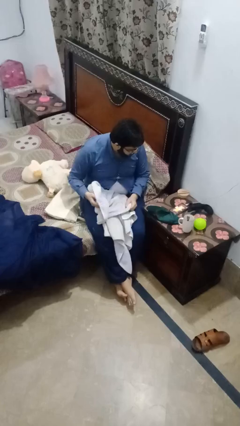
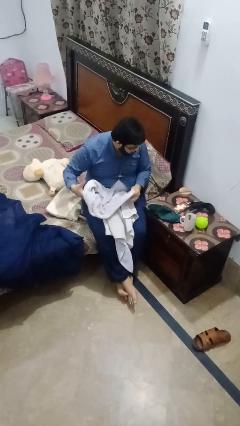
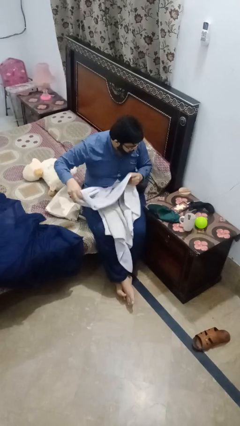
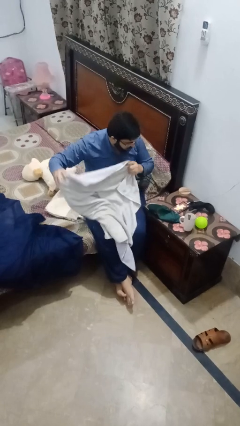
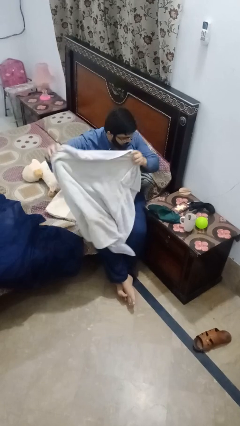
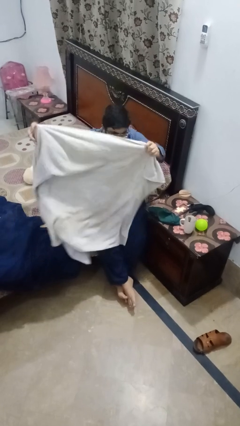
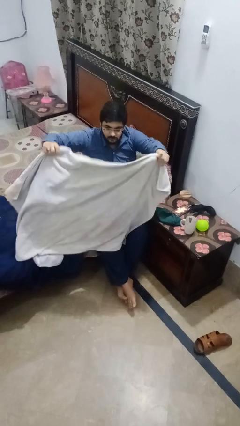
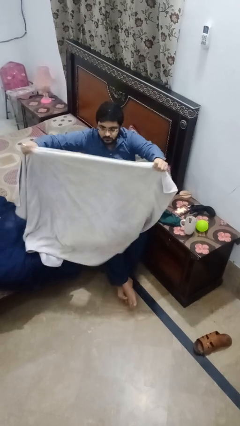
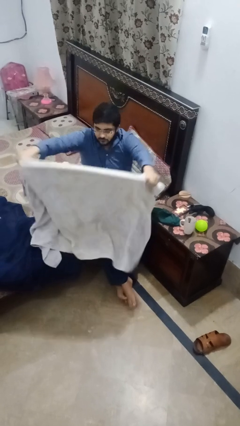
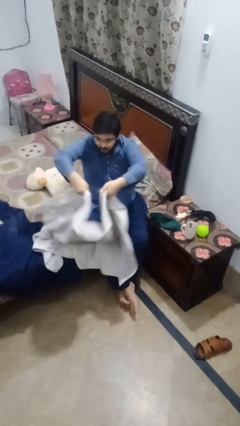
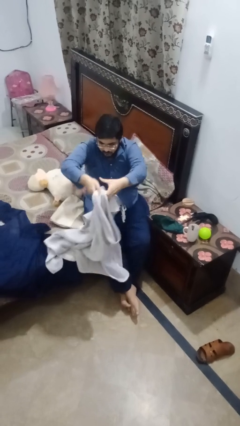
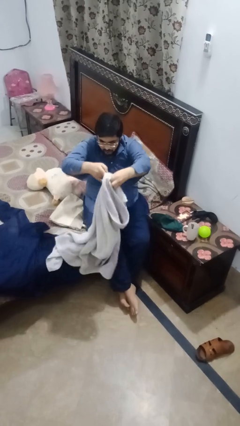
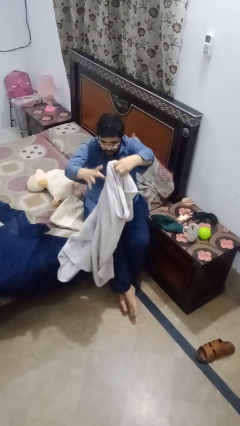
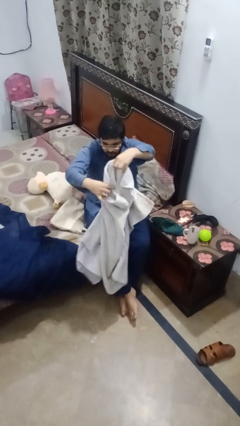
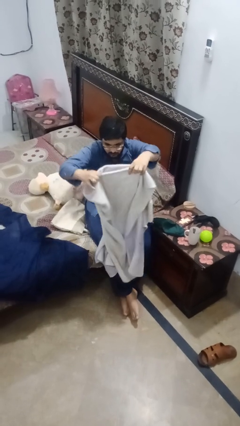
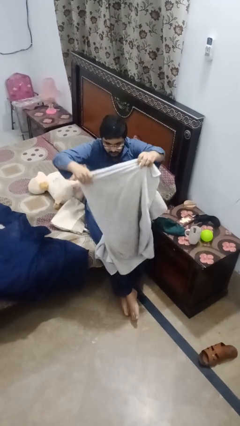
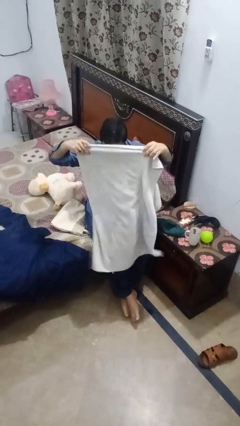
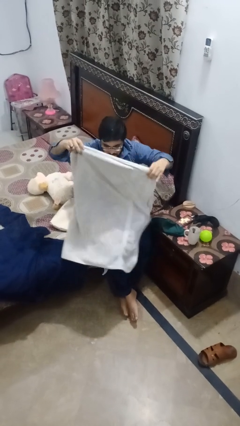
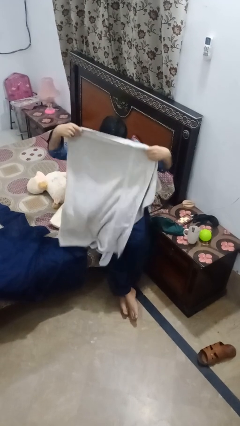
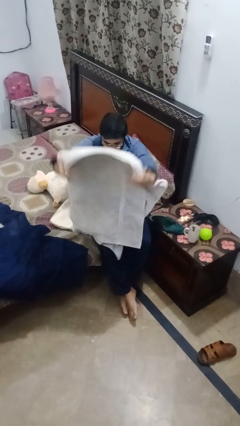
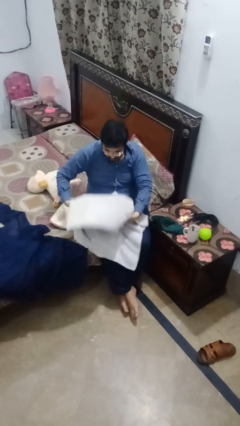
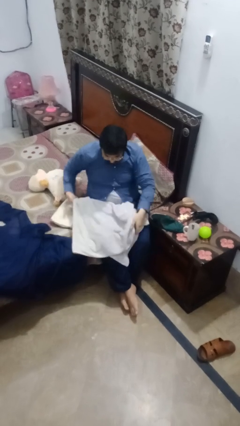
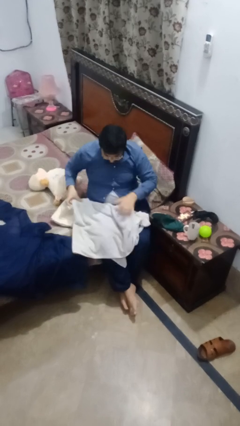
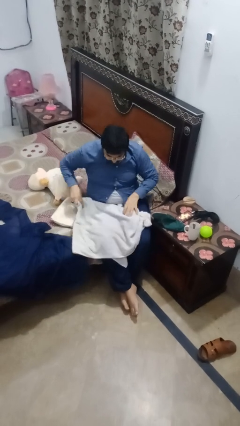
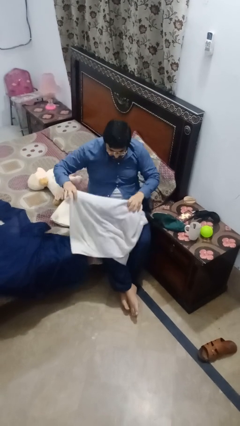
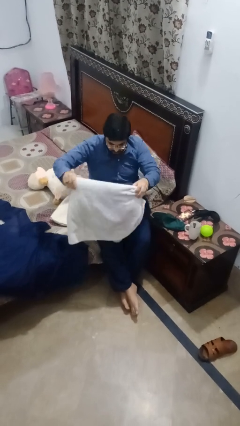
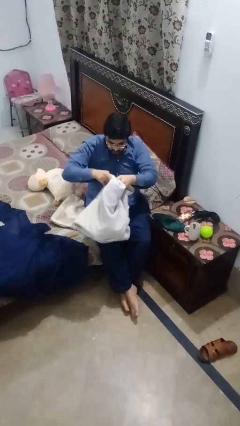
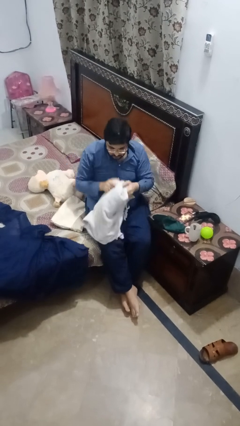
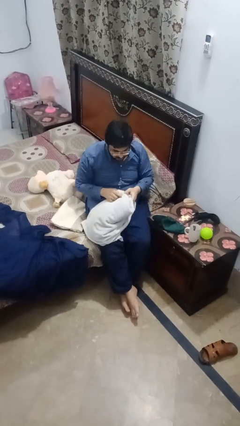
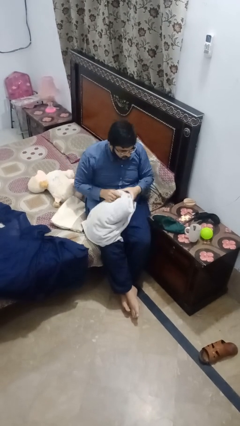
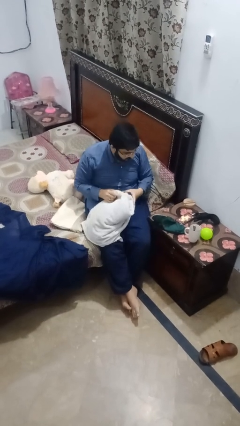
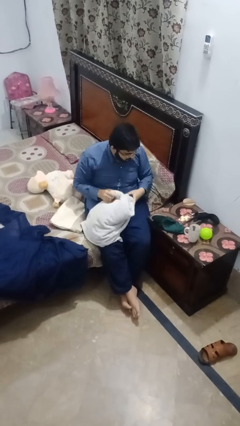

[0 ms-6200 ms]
person folds towel

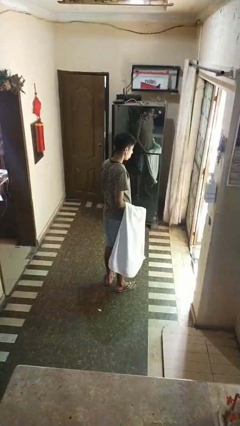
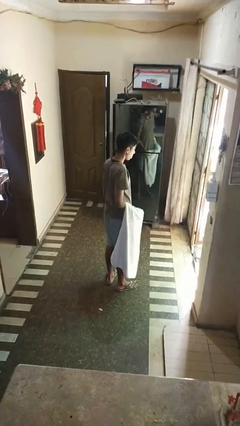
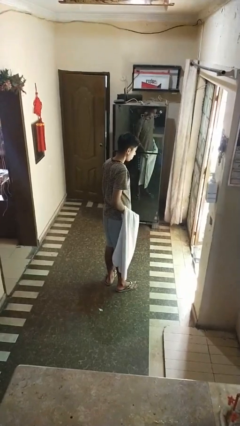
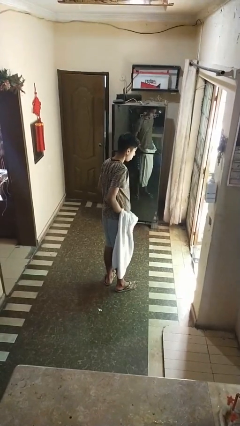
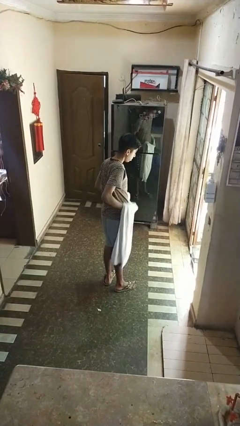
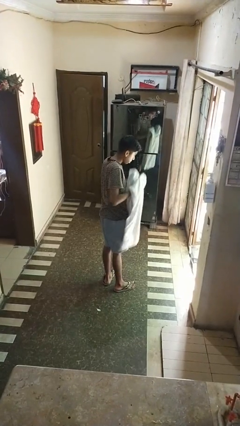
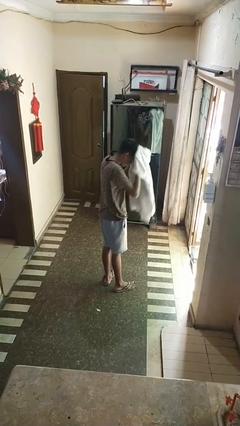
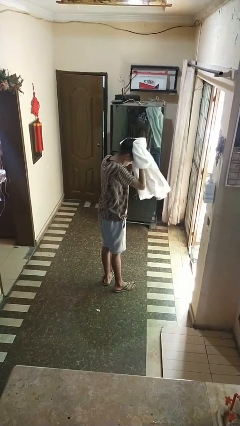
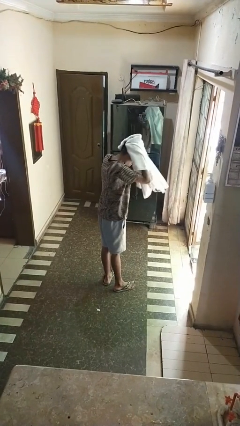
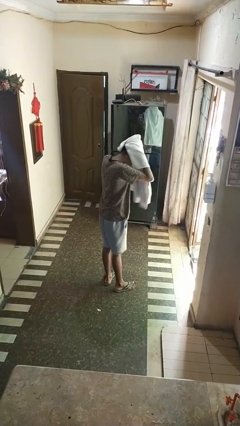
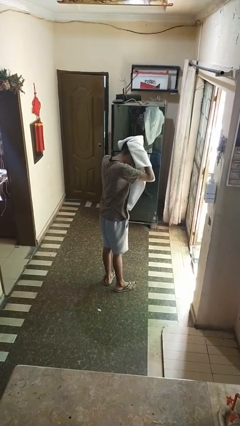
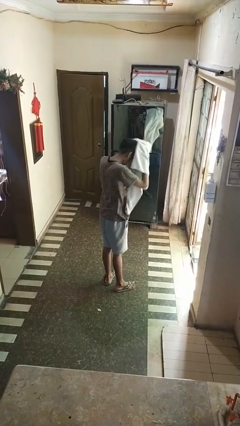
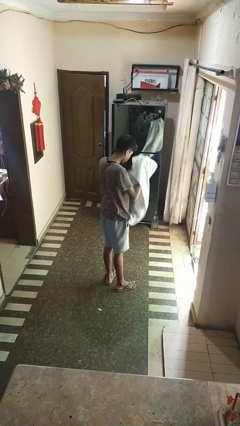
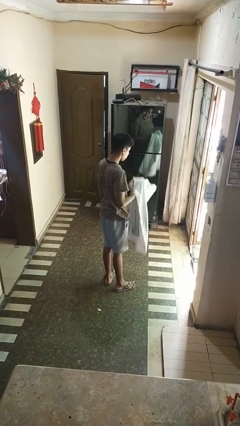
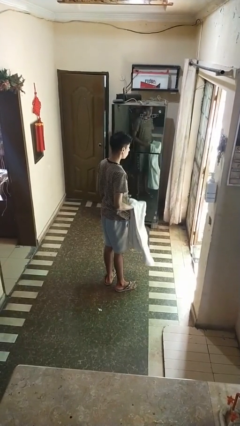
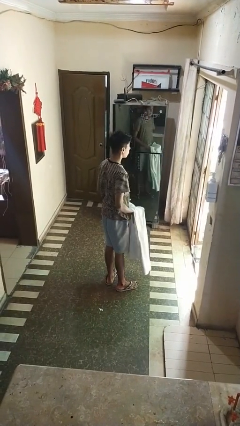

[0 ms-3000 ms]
person dries hair with towel

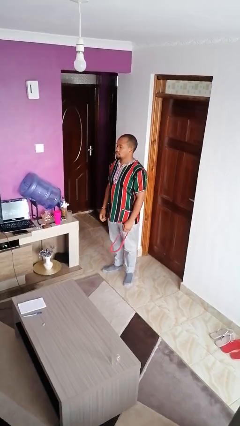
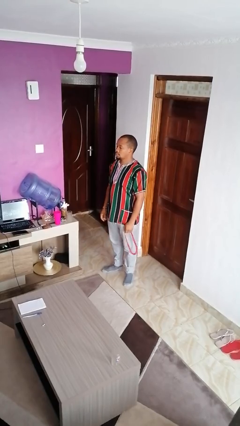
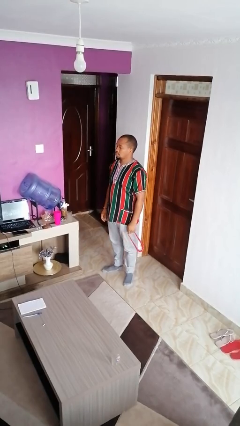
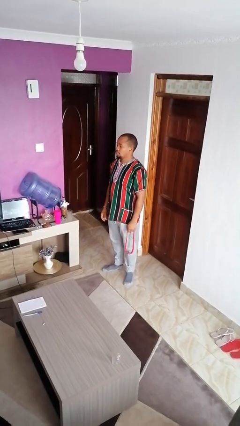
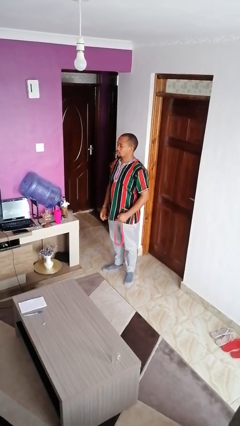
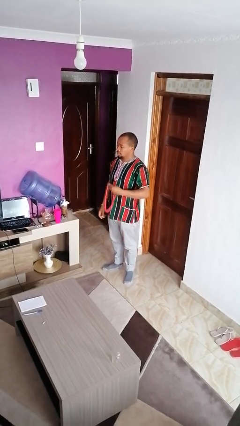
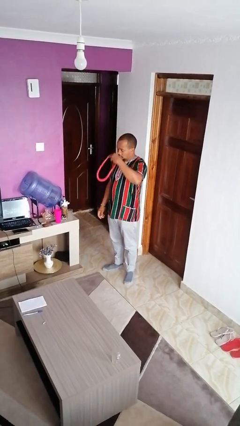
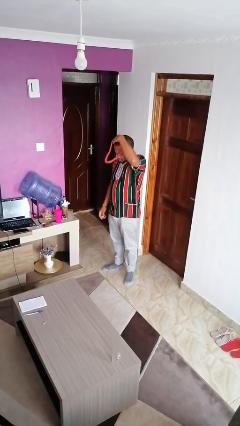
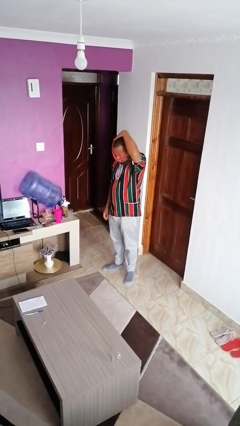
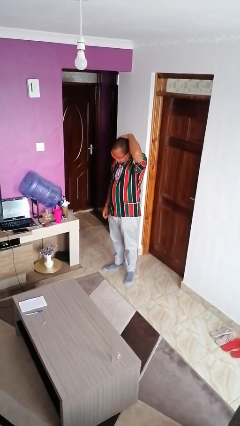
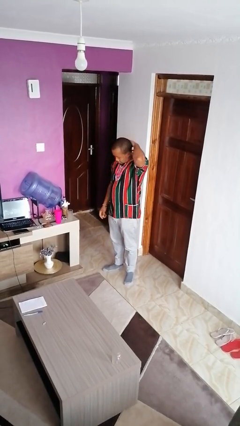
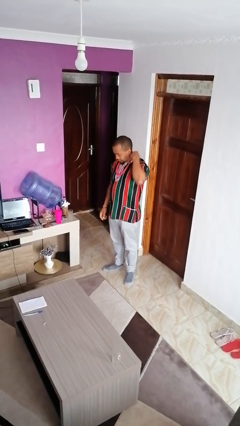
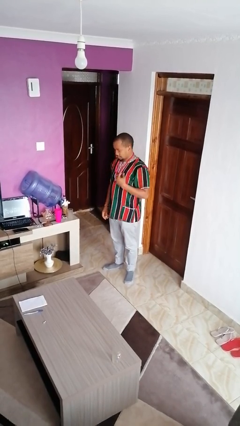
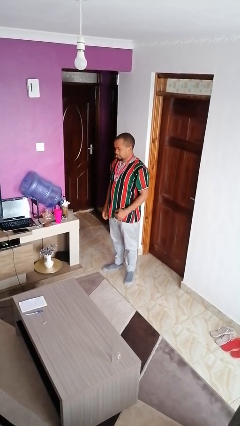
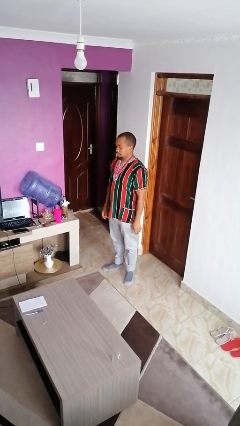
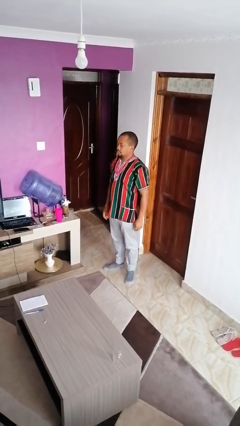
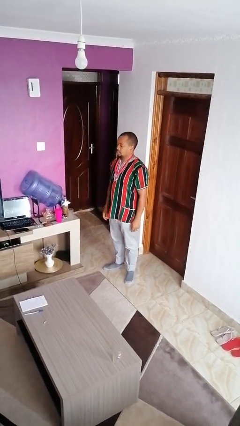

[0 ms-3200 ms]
person puts on necklace

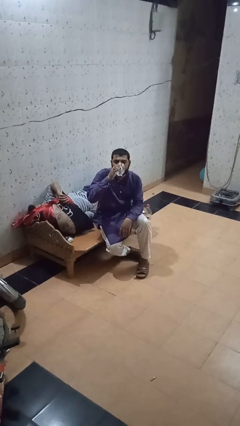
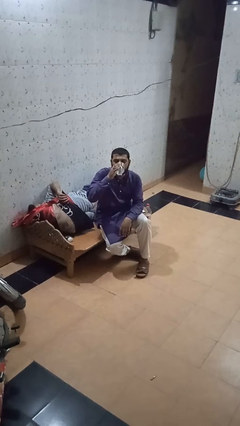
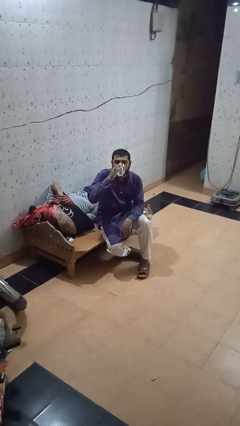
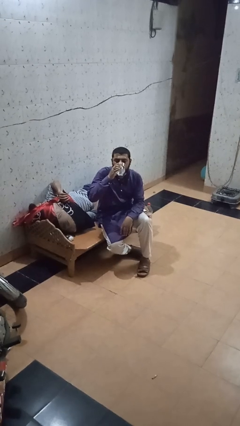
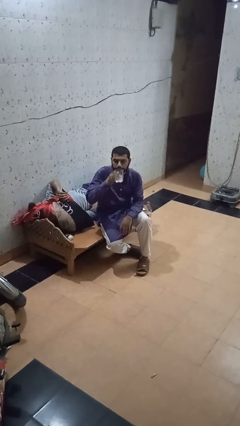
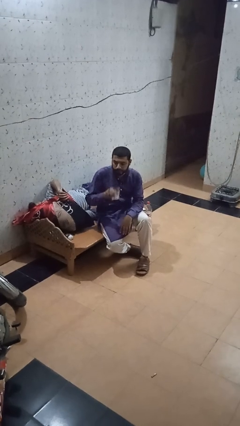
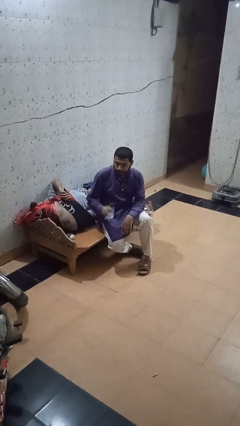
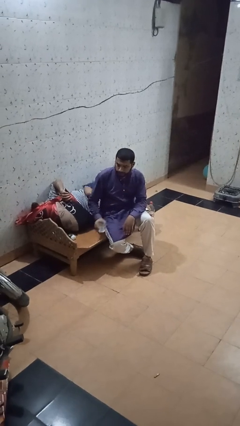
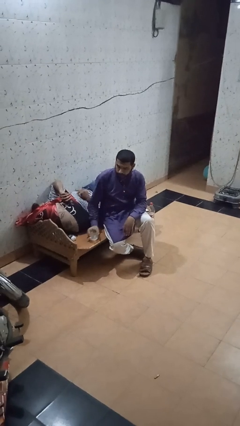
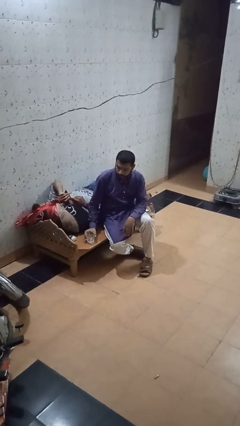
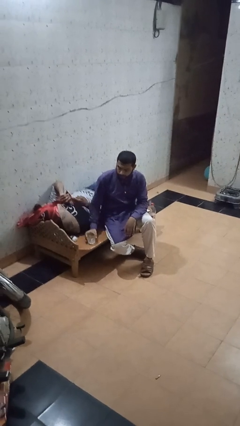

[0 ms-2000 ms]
person puts down object on table

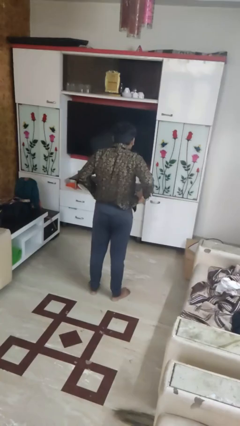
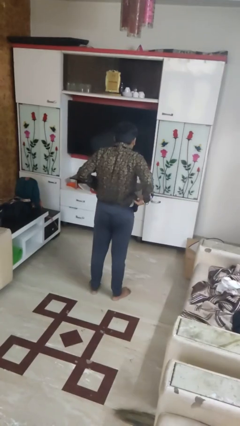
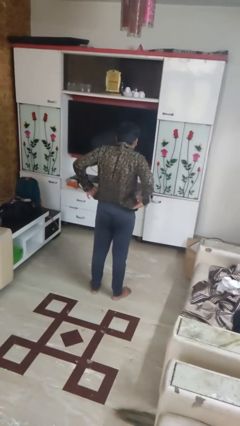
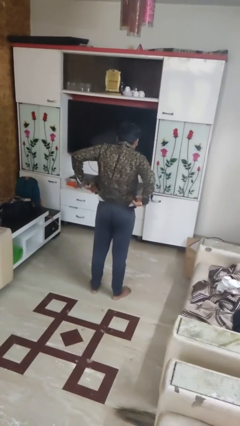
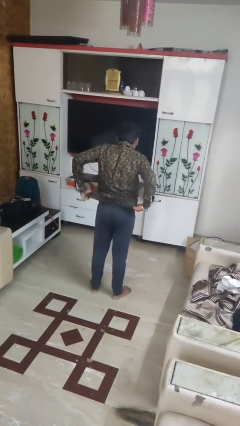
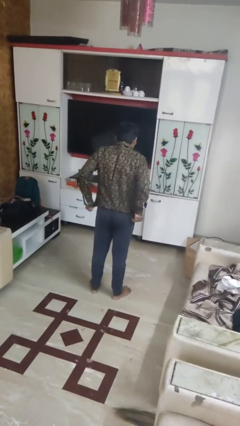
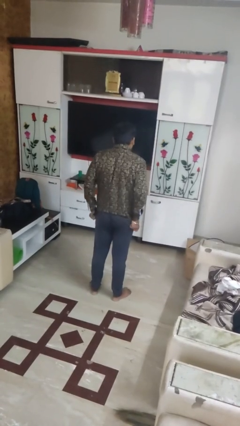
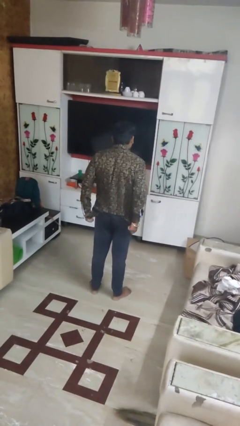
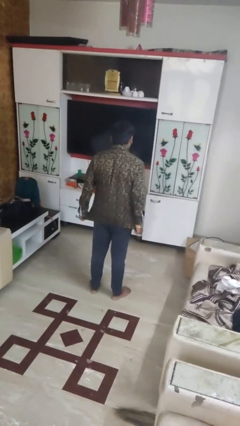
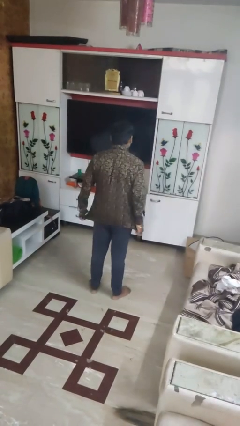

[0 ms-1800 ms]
person untucks shirt

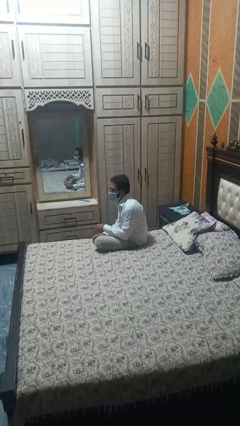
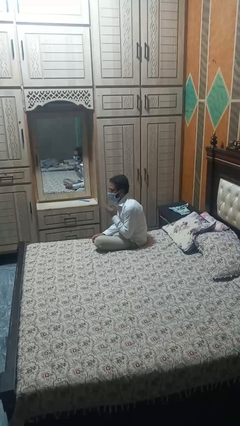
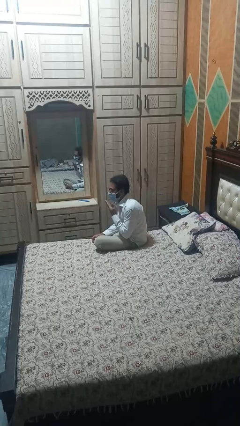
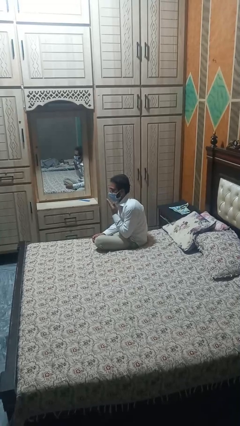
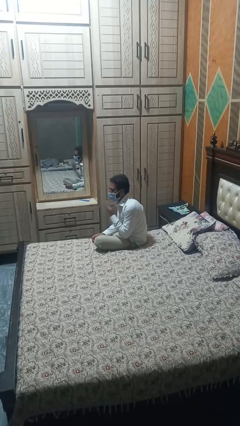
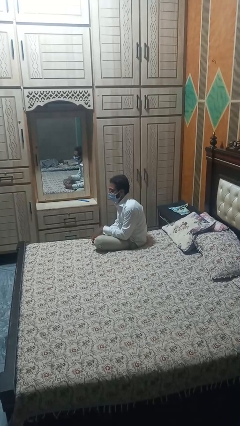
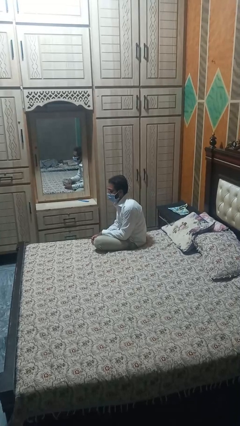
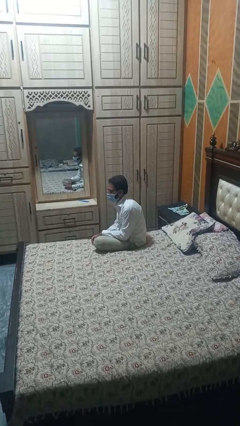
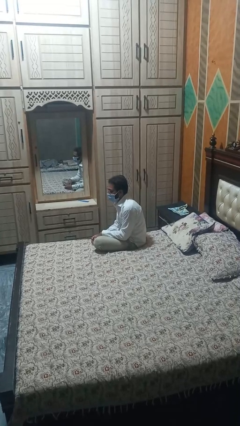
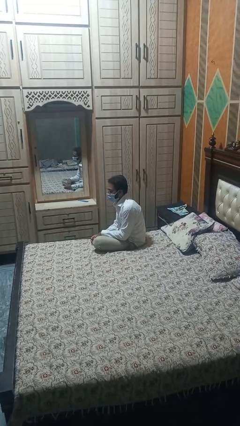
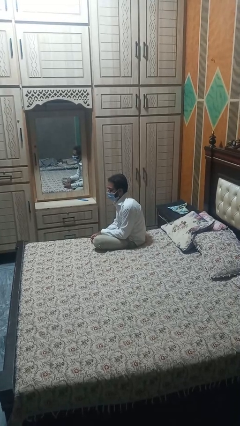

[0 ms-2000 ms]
person strokes chin
